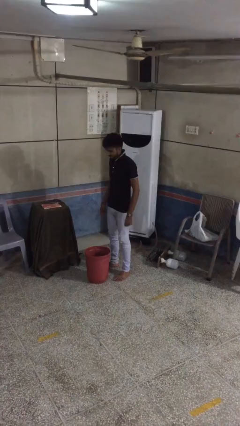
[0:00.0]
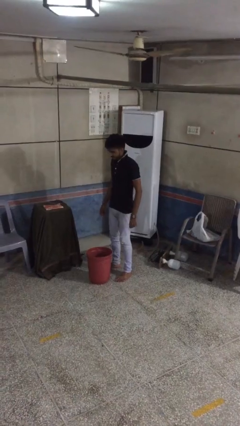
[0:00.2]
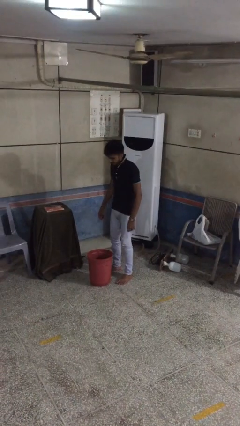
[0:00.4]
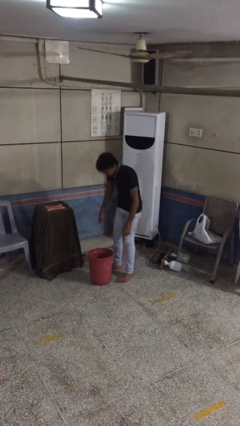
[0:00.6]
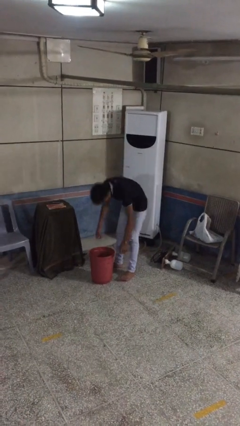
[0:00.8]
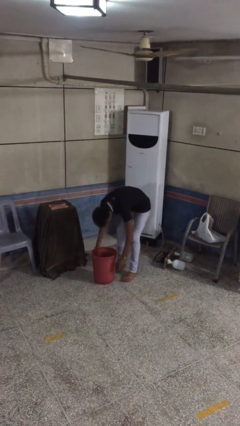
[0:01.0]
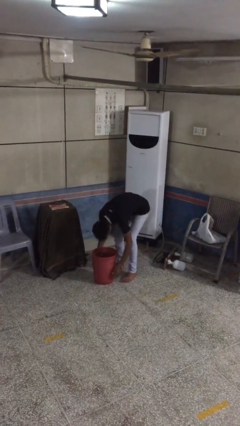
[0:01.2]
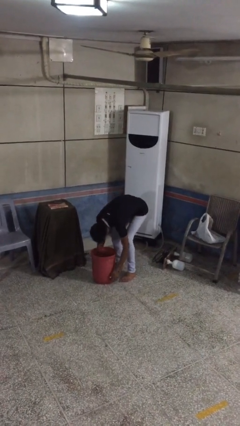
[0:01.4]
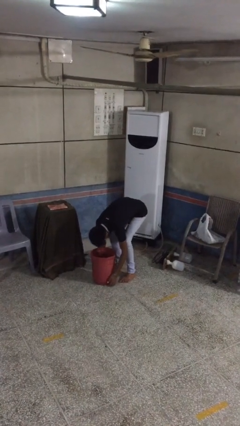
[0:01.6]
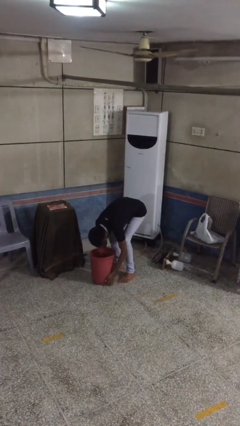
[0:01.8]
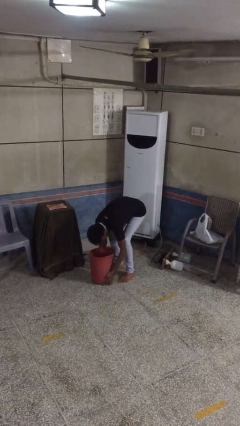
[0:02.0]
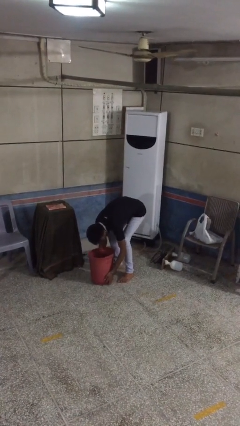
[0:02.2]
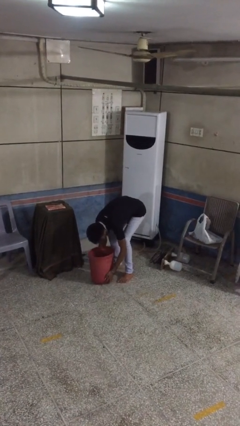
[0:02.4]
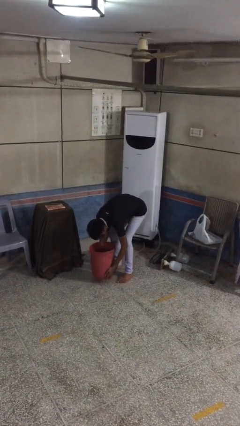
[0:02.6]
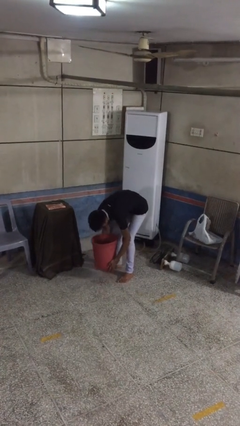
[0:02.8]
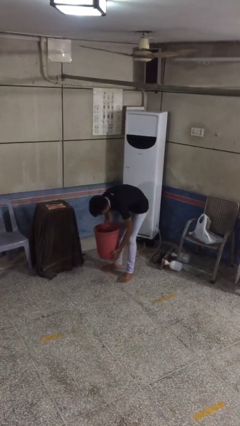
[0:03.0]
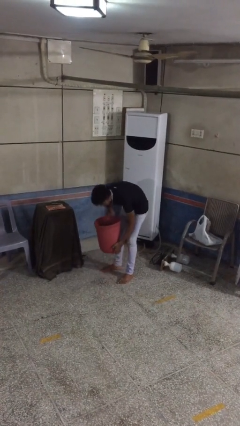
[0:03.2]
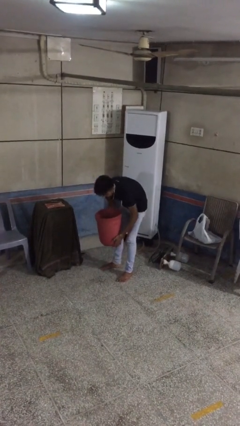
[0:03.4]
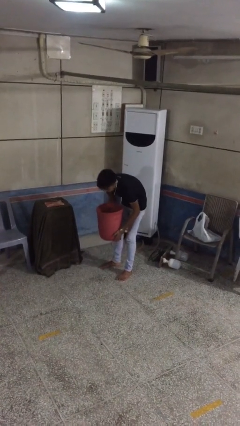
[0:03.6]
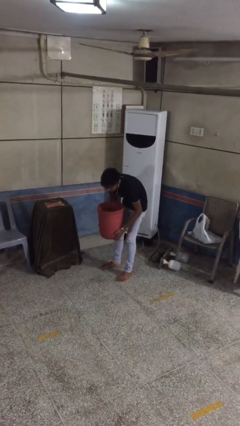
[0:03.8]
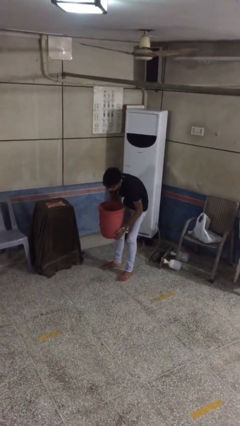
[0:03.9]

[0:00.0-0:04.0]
person picks up object from floor

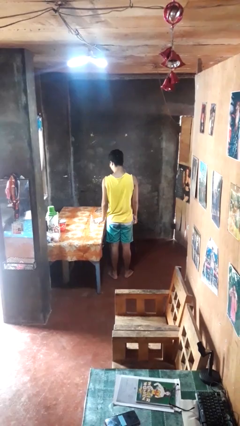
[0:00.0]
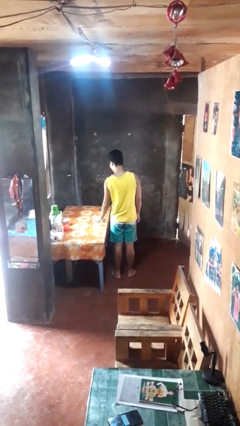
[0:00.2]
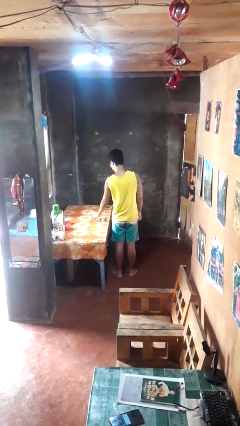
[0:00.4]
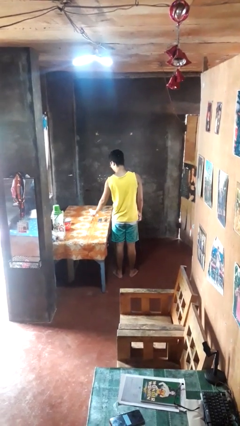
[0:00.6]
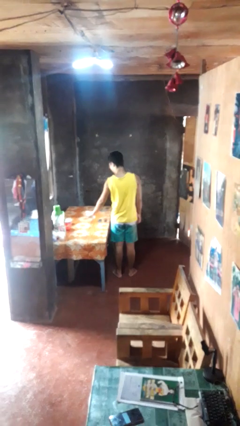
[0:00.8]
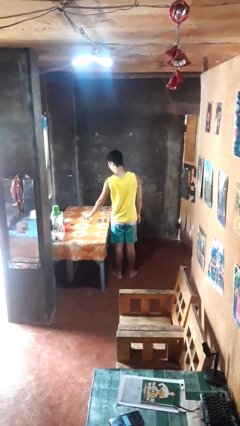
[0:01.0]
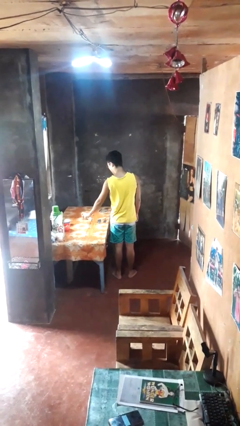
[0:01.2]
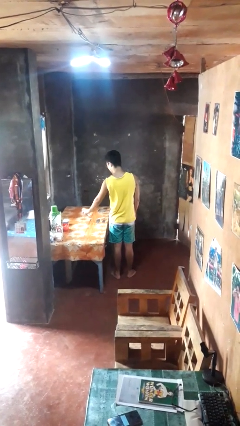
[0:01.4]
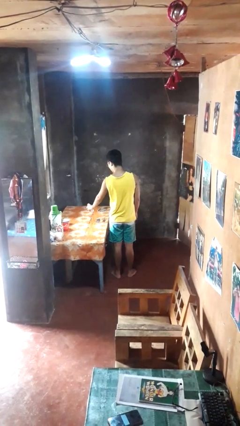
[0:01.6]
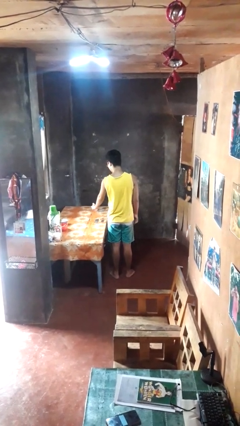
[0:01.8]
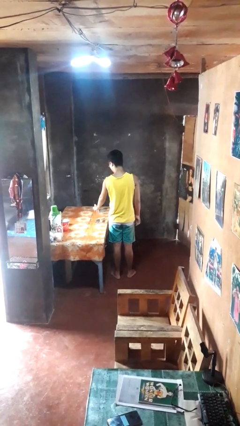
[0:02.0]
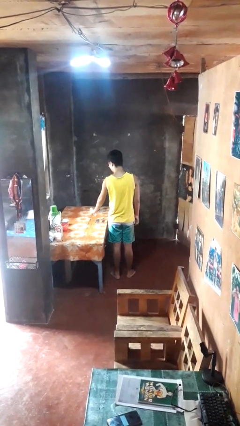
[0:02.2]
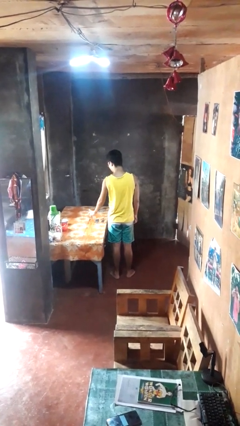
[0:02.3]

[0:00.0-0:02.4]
person sprays from bottle

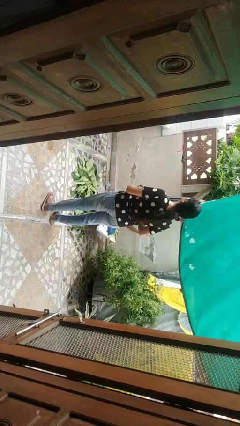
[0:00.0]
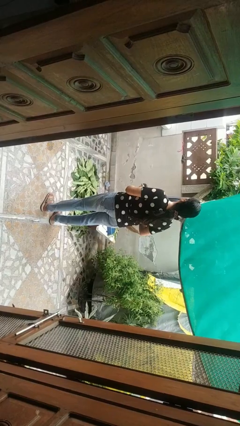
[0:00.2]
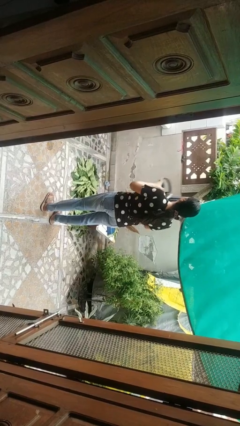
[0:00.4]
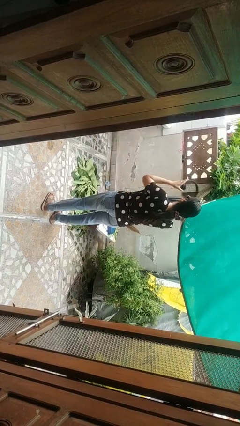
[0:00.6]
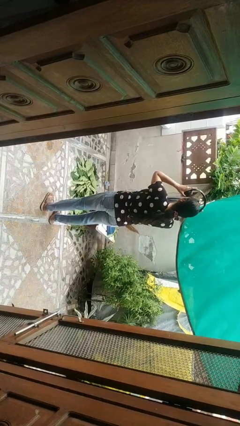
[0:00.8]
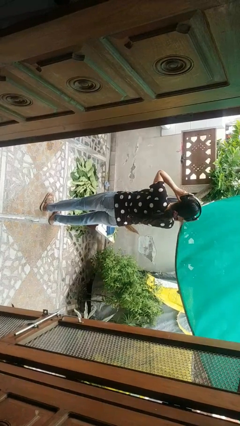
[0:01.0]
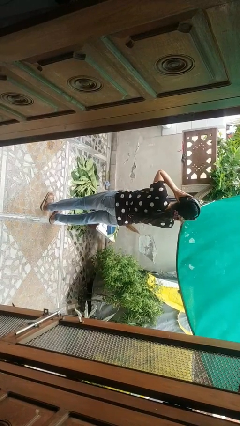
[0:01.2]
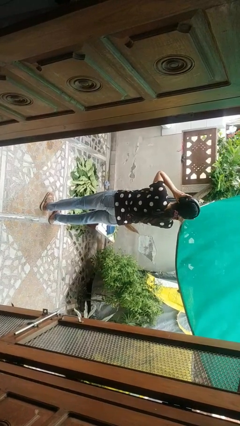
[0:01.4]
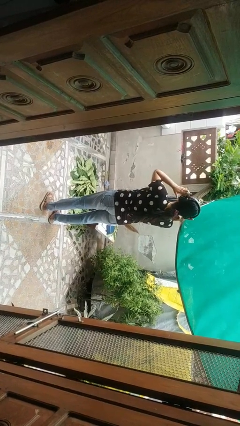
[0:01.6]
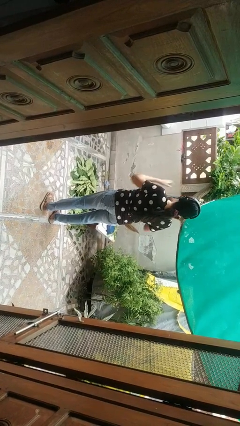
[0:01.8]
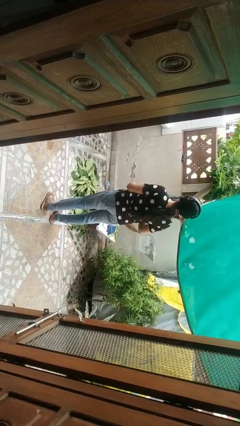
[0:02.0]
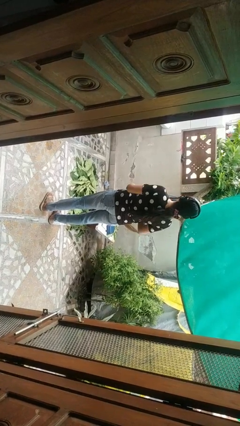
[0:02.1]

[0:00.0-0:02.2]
person puts on headphones

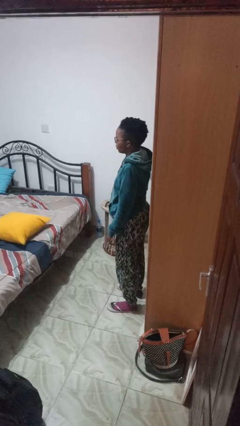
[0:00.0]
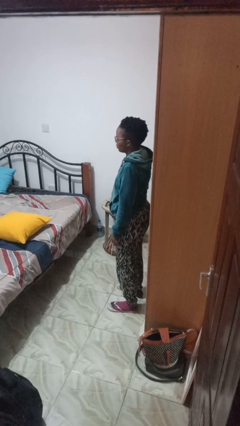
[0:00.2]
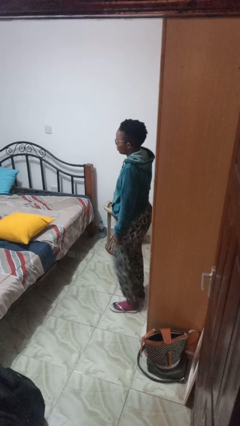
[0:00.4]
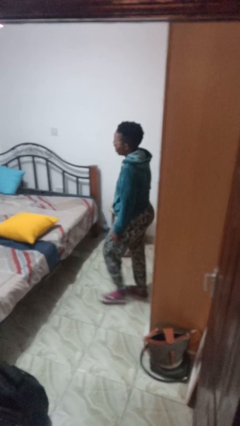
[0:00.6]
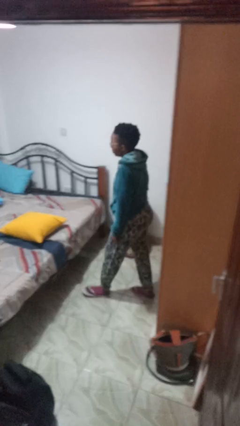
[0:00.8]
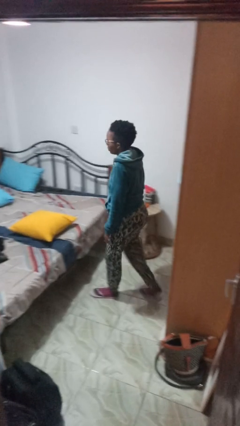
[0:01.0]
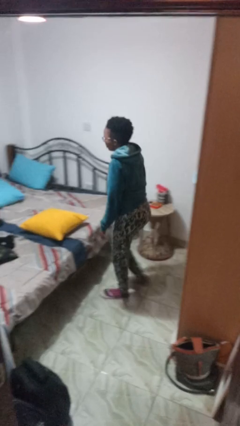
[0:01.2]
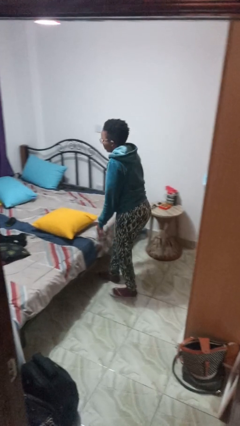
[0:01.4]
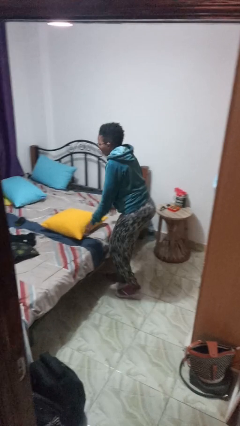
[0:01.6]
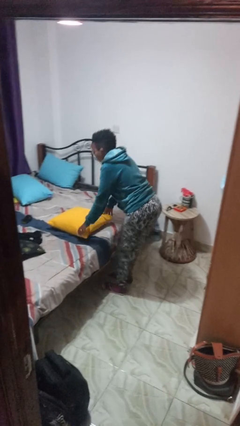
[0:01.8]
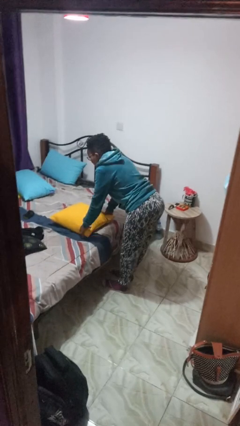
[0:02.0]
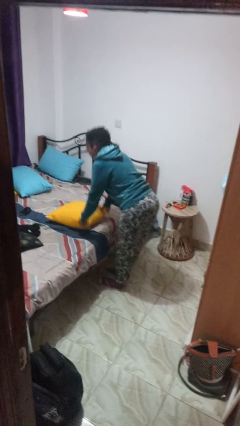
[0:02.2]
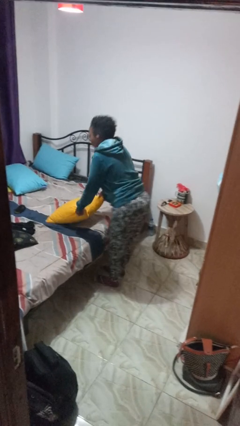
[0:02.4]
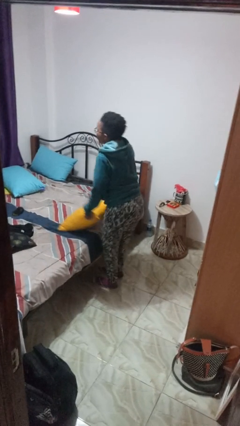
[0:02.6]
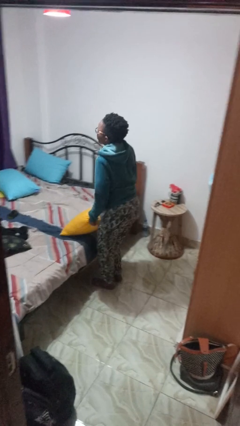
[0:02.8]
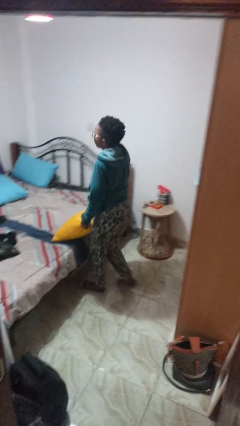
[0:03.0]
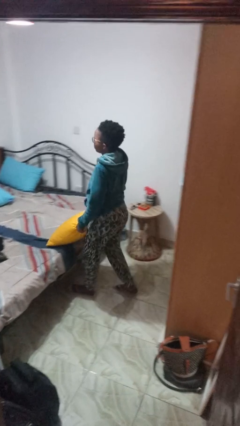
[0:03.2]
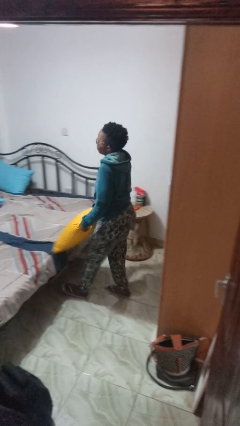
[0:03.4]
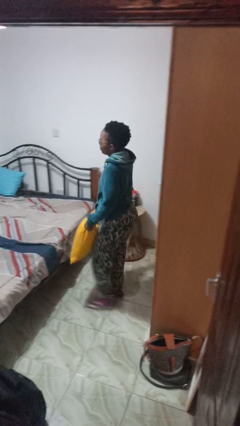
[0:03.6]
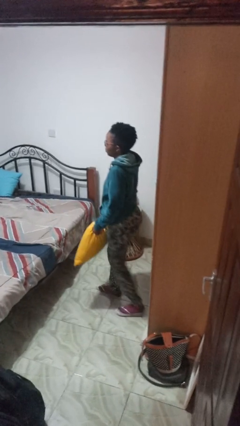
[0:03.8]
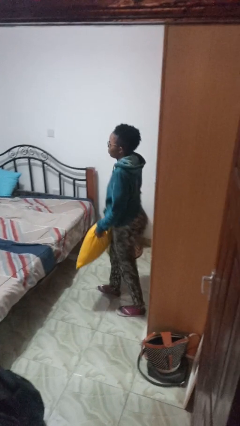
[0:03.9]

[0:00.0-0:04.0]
person picks up object from bed

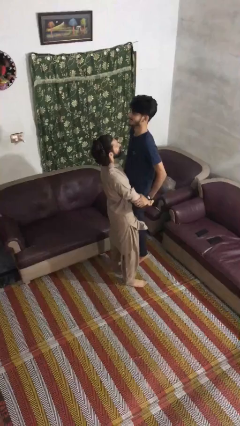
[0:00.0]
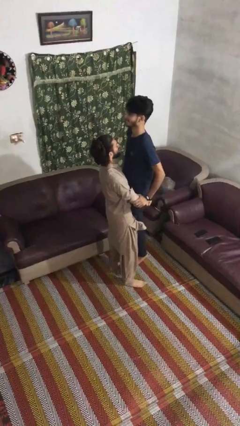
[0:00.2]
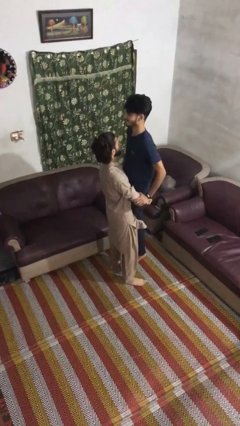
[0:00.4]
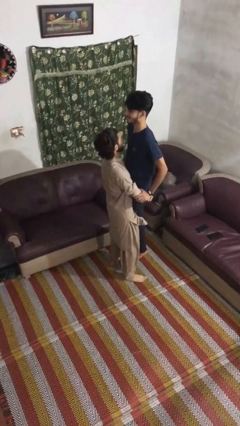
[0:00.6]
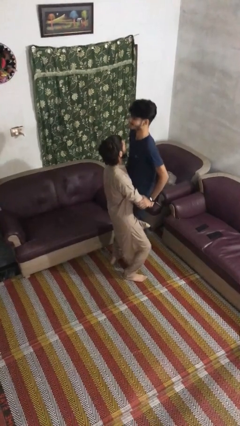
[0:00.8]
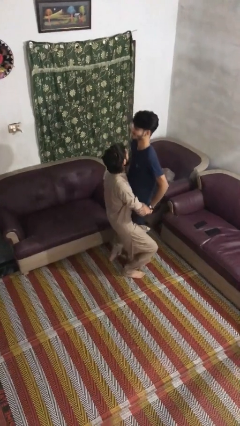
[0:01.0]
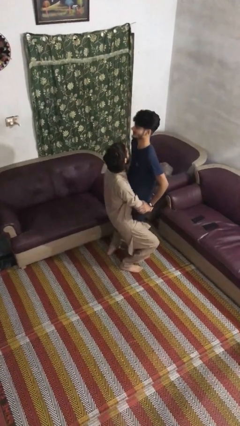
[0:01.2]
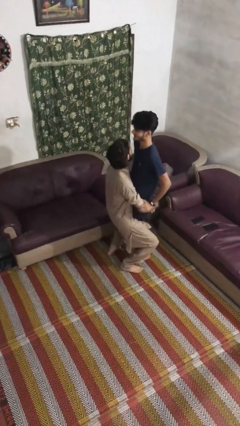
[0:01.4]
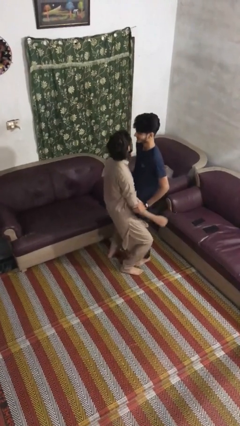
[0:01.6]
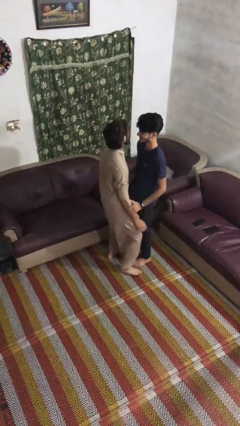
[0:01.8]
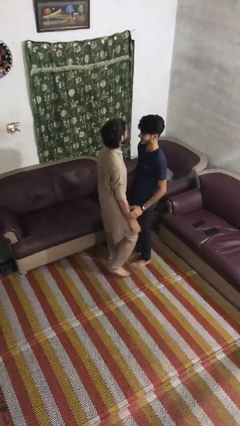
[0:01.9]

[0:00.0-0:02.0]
person puts down person

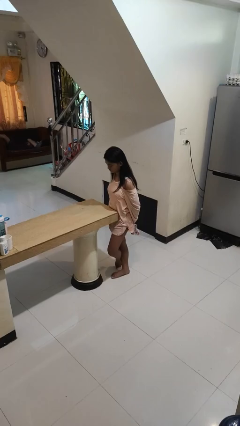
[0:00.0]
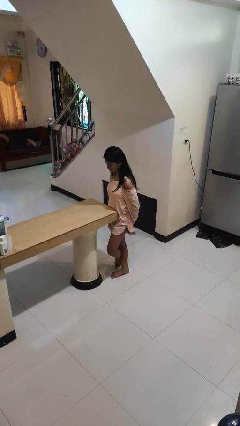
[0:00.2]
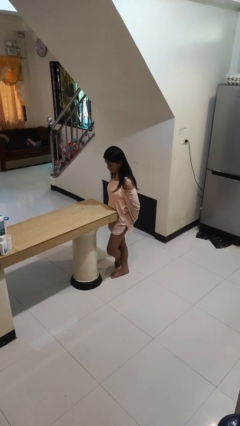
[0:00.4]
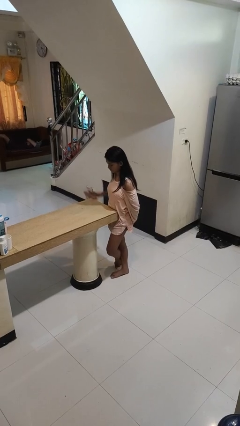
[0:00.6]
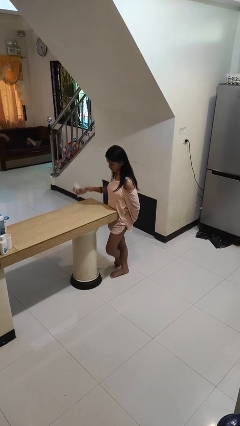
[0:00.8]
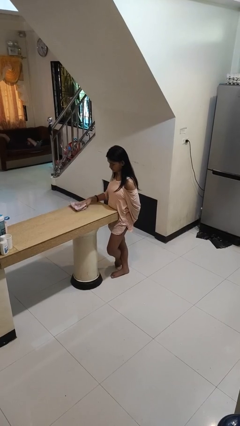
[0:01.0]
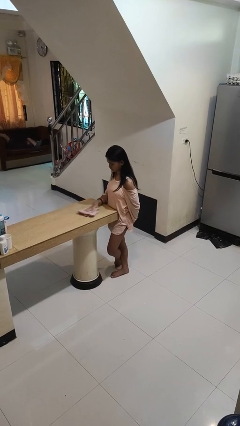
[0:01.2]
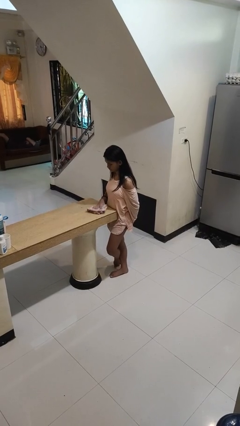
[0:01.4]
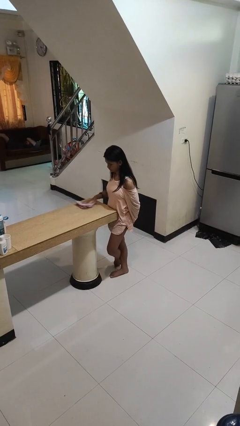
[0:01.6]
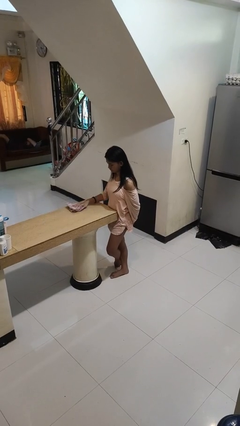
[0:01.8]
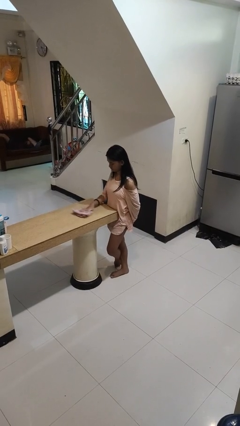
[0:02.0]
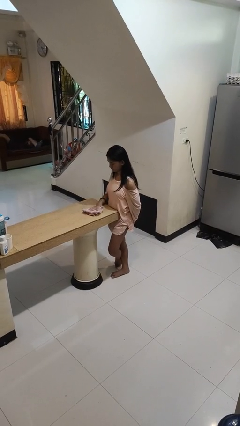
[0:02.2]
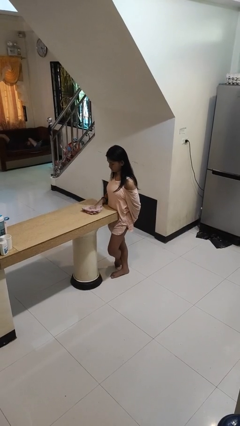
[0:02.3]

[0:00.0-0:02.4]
person cleans table with rag

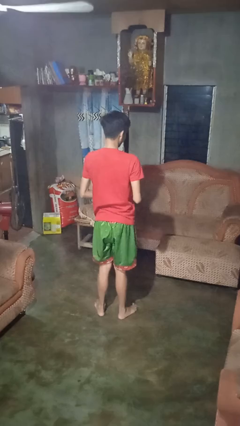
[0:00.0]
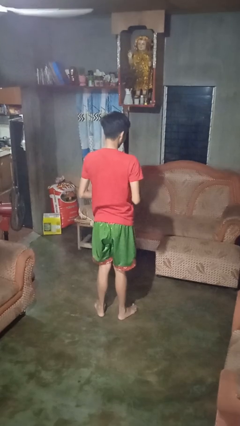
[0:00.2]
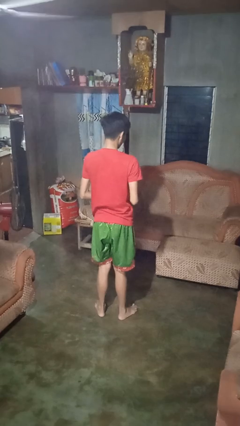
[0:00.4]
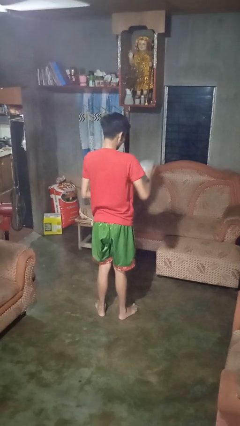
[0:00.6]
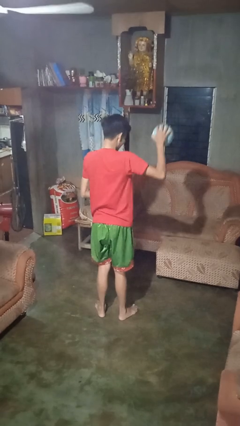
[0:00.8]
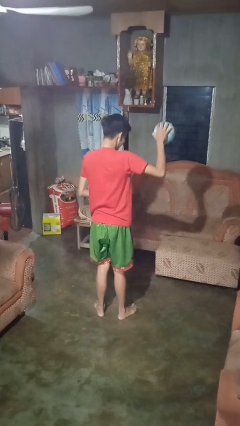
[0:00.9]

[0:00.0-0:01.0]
person bounces ball on floor
